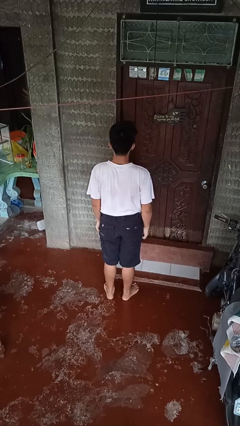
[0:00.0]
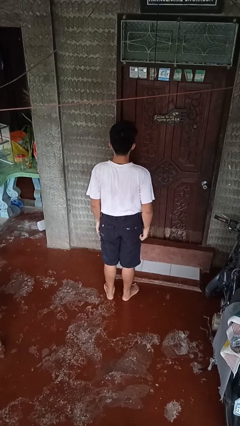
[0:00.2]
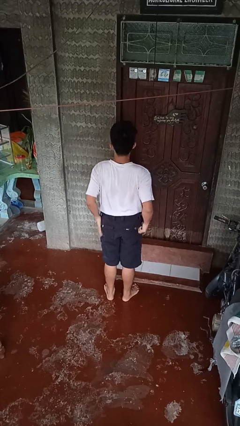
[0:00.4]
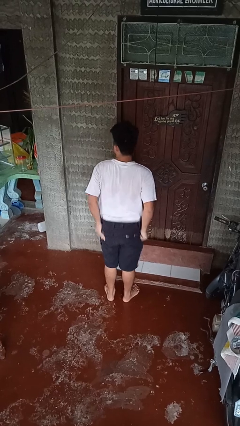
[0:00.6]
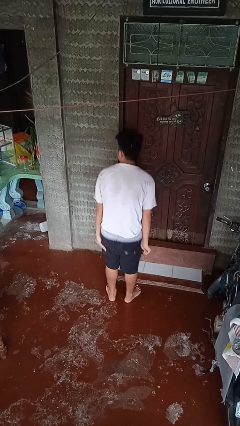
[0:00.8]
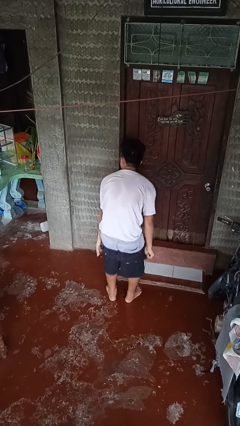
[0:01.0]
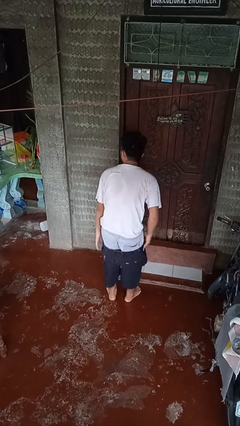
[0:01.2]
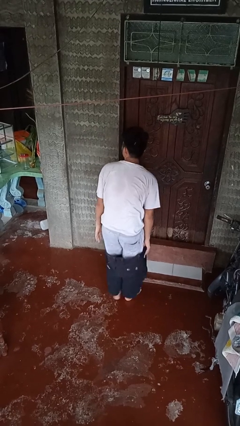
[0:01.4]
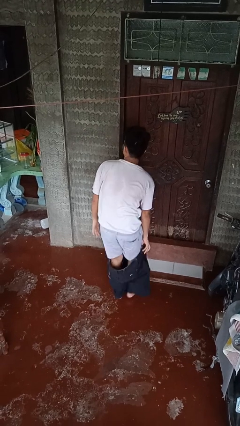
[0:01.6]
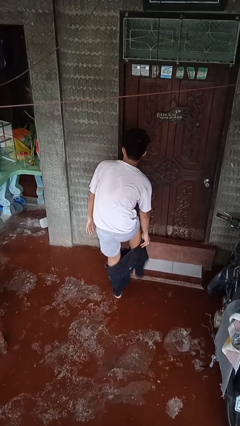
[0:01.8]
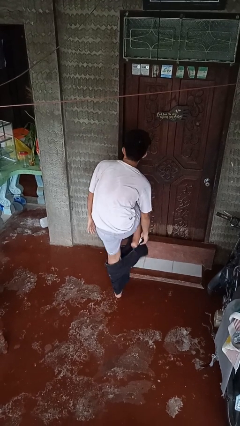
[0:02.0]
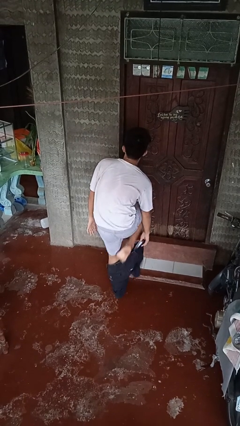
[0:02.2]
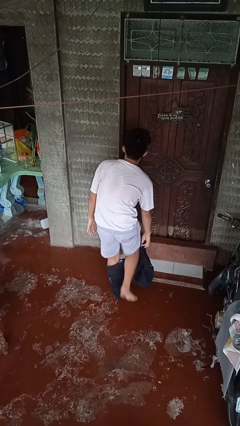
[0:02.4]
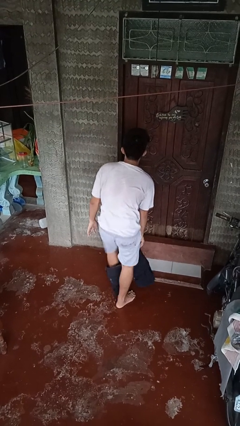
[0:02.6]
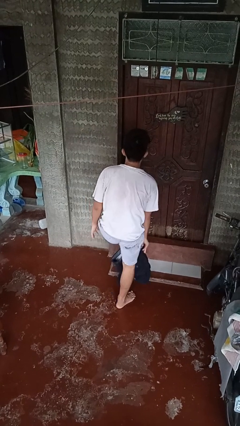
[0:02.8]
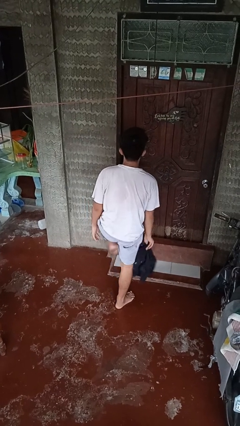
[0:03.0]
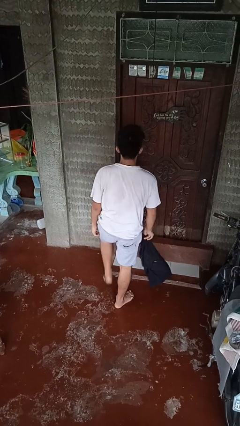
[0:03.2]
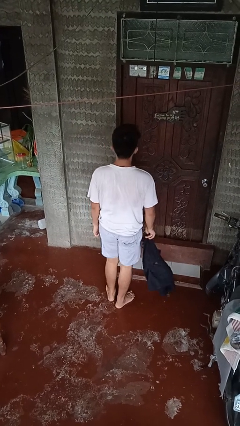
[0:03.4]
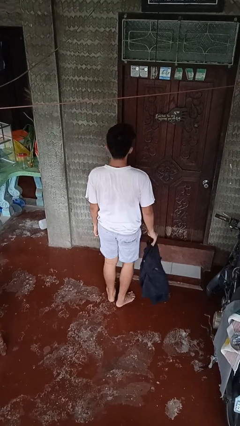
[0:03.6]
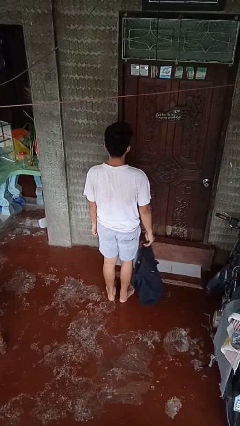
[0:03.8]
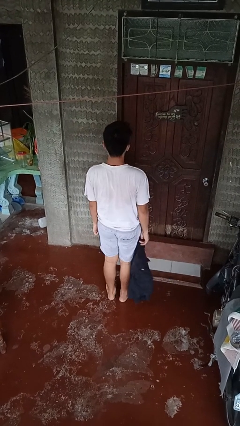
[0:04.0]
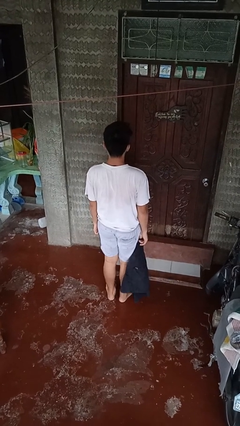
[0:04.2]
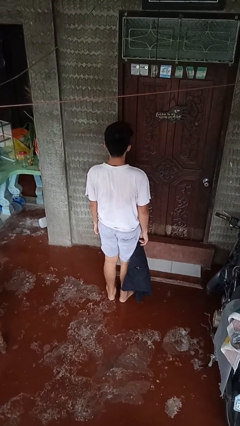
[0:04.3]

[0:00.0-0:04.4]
person takes off pants

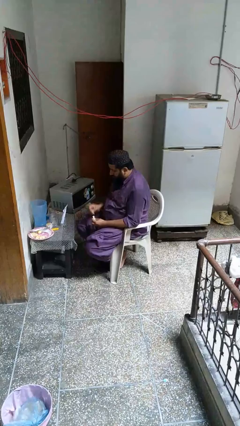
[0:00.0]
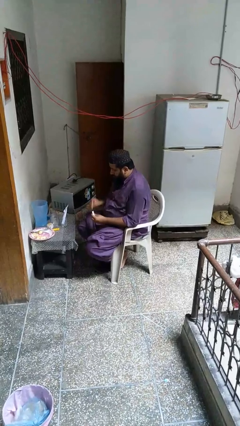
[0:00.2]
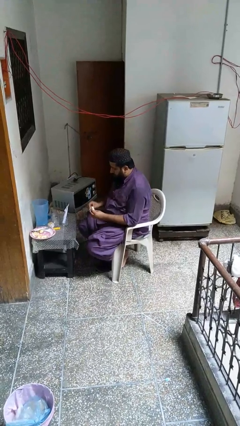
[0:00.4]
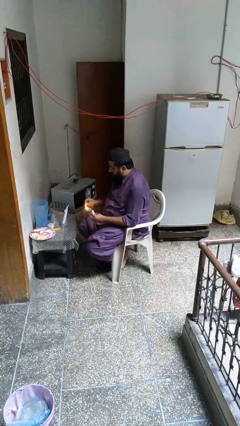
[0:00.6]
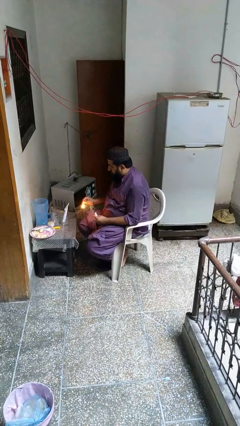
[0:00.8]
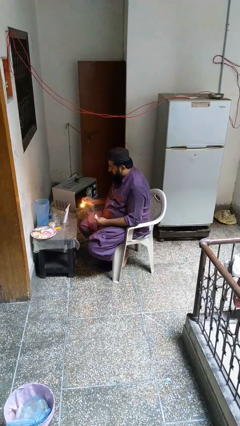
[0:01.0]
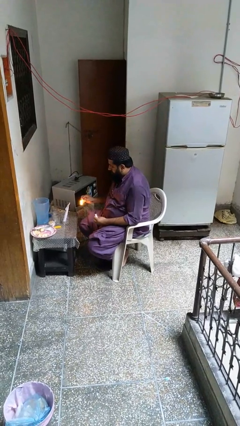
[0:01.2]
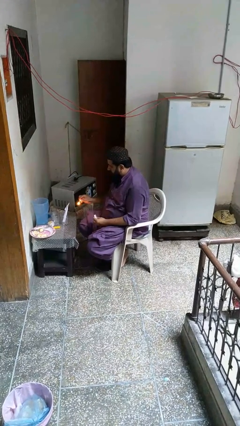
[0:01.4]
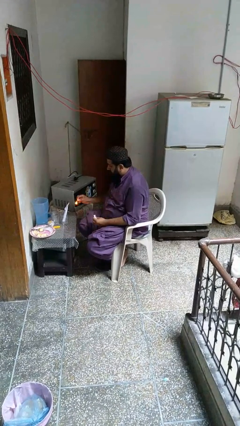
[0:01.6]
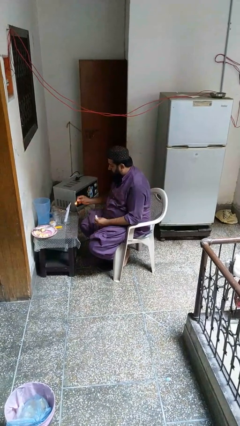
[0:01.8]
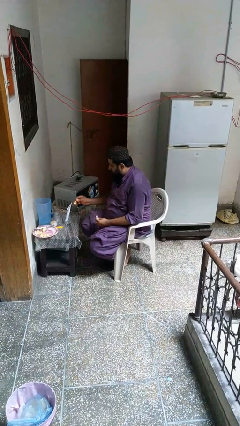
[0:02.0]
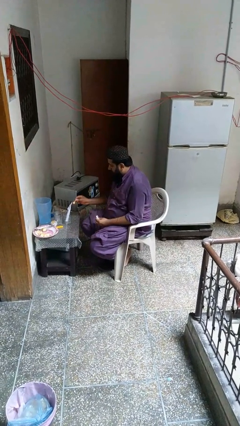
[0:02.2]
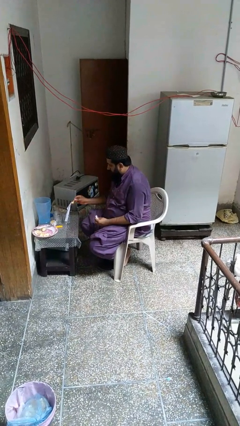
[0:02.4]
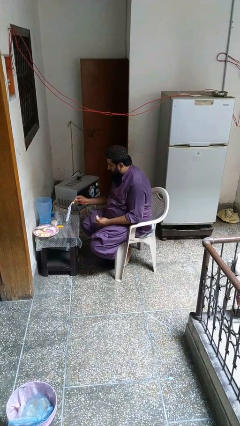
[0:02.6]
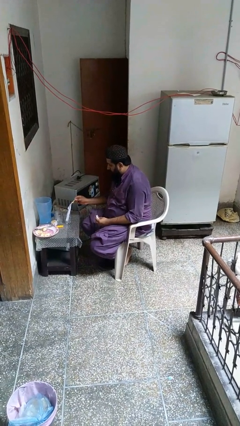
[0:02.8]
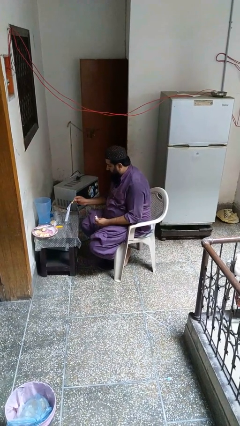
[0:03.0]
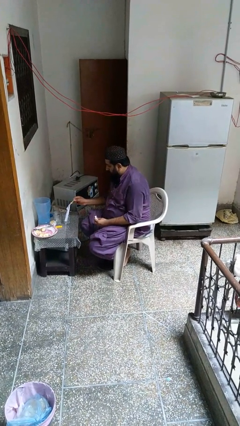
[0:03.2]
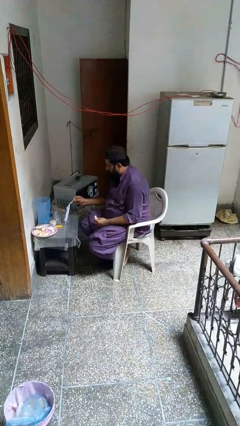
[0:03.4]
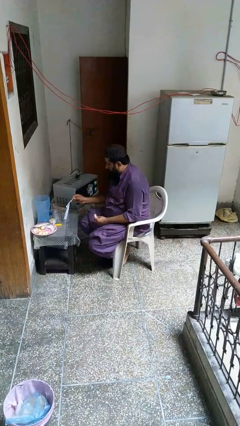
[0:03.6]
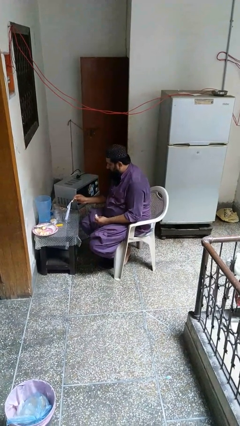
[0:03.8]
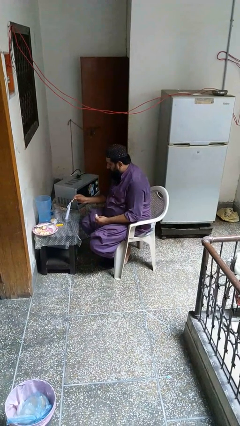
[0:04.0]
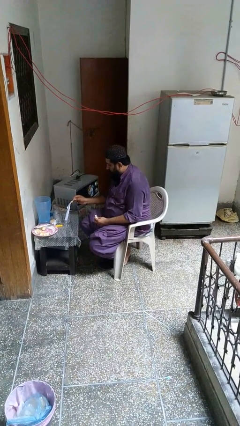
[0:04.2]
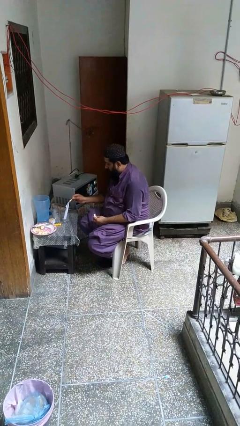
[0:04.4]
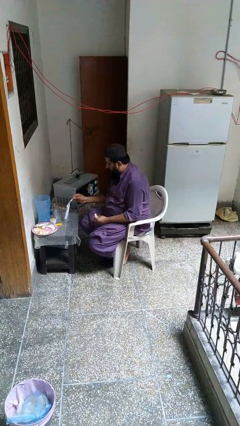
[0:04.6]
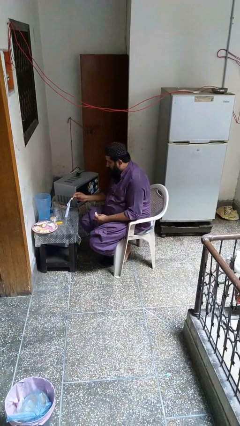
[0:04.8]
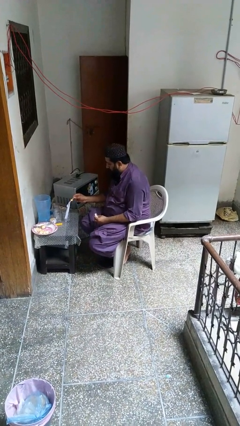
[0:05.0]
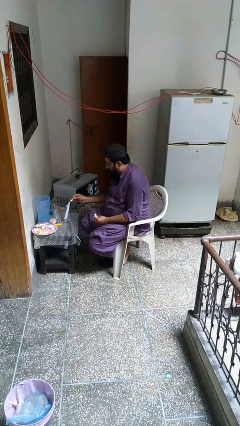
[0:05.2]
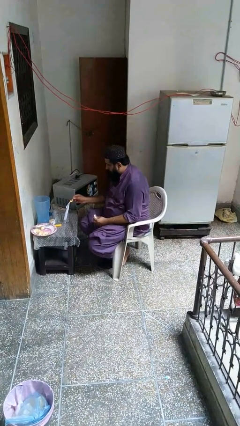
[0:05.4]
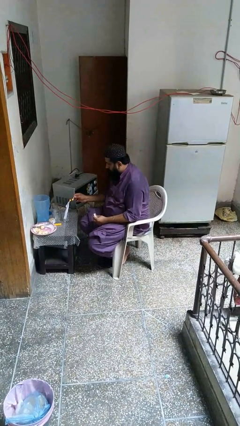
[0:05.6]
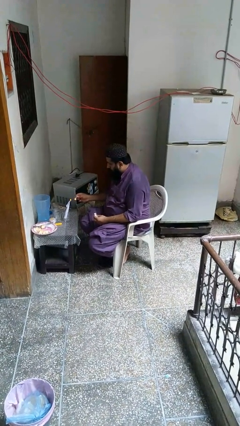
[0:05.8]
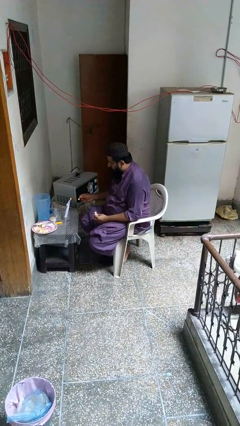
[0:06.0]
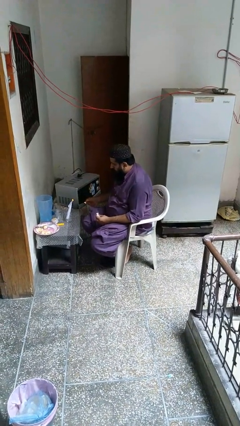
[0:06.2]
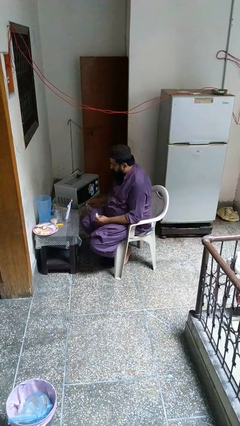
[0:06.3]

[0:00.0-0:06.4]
person lights candle

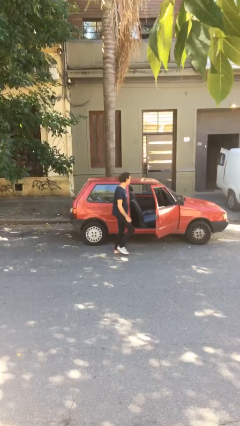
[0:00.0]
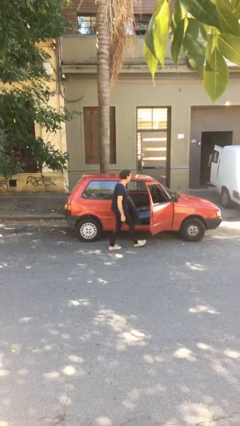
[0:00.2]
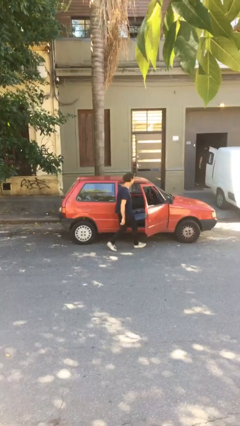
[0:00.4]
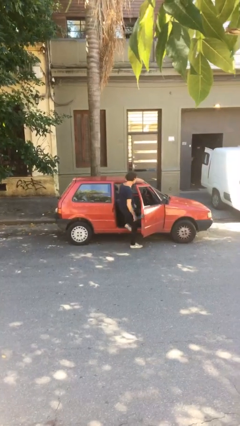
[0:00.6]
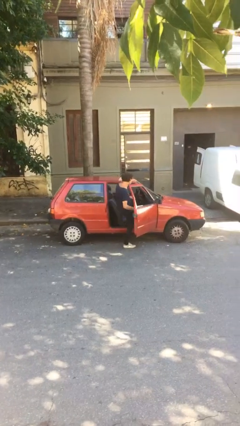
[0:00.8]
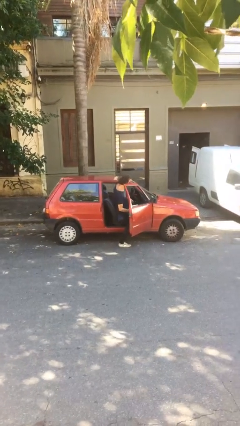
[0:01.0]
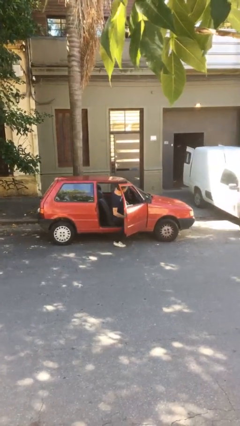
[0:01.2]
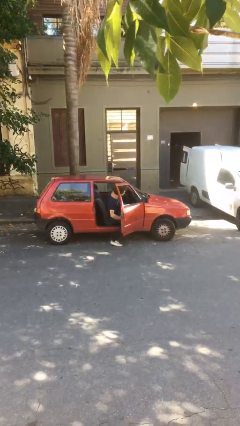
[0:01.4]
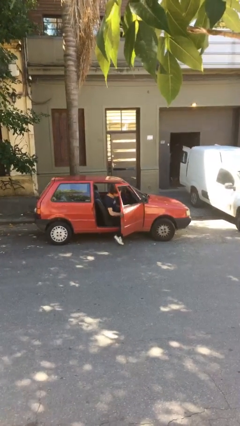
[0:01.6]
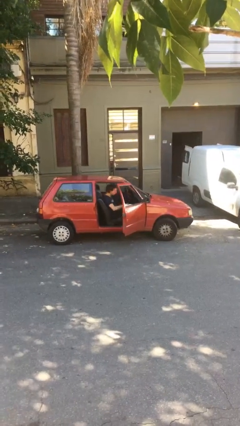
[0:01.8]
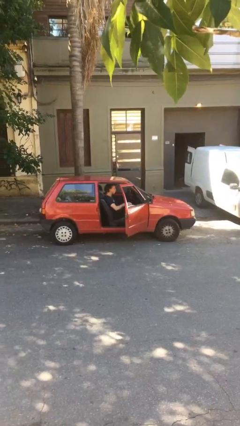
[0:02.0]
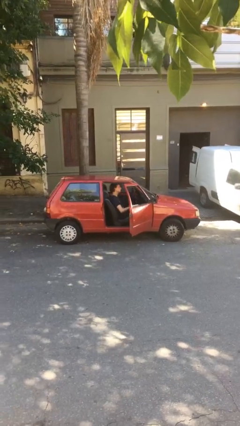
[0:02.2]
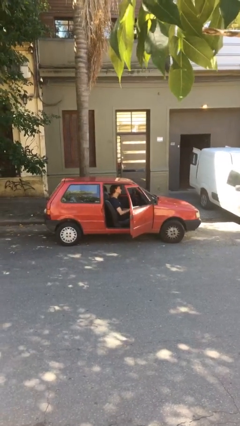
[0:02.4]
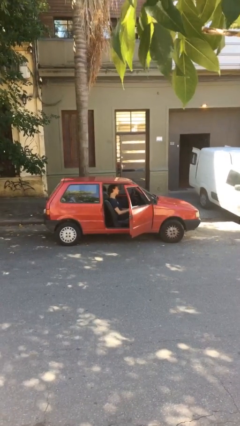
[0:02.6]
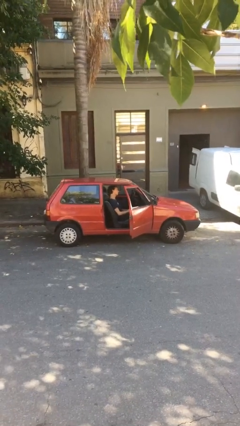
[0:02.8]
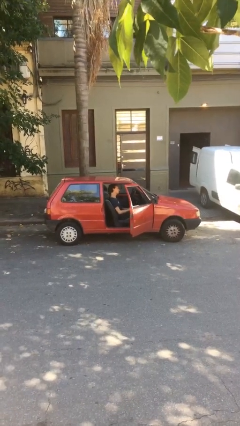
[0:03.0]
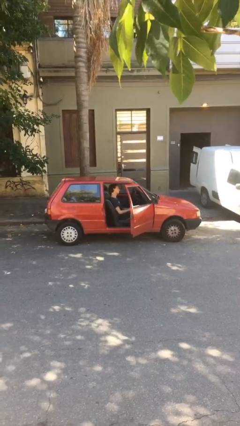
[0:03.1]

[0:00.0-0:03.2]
person enters car

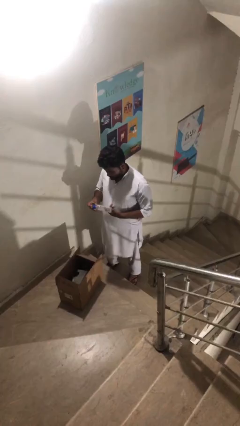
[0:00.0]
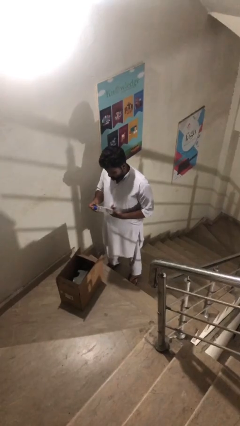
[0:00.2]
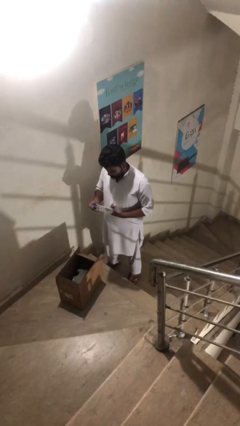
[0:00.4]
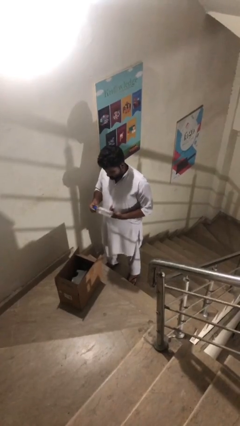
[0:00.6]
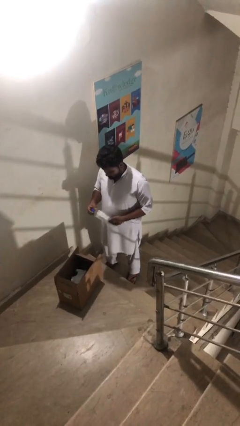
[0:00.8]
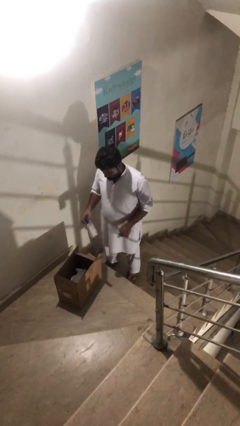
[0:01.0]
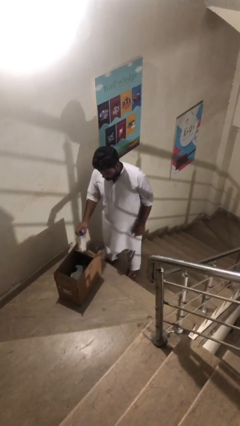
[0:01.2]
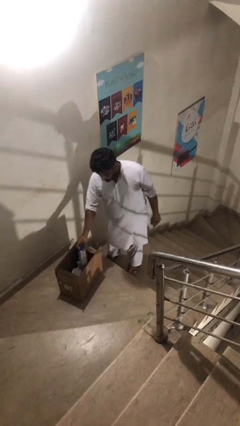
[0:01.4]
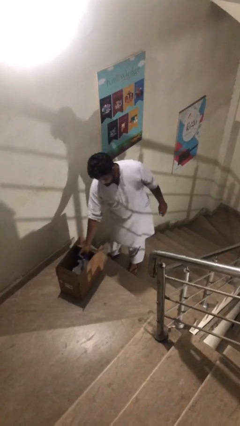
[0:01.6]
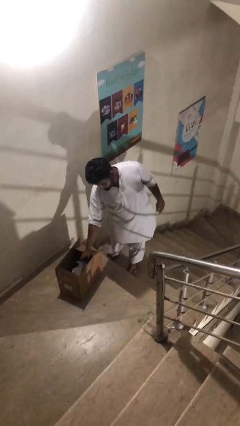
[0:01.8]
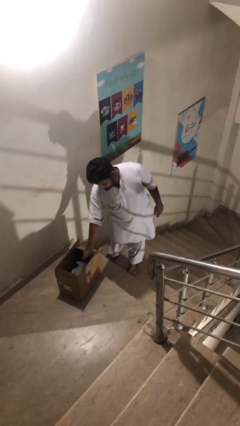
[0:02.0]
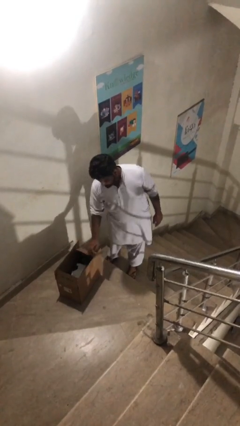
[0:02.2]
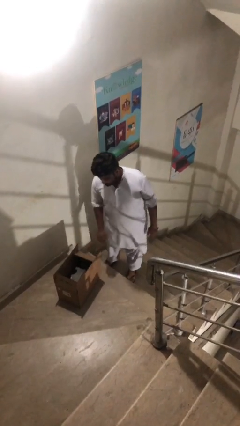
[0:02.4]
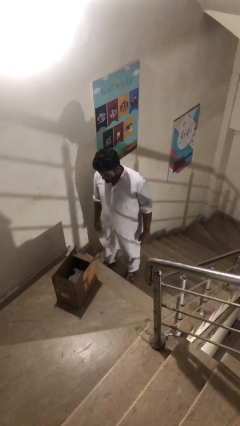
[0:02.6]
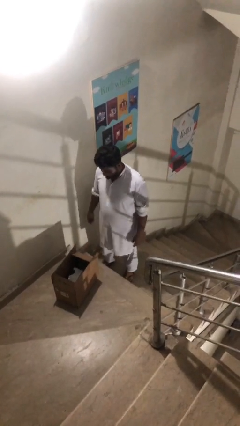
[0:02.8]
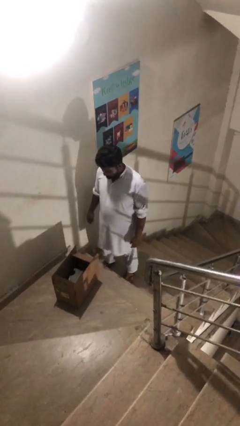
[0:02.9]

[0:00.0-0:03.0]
person puts object into box

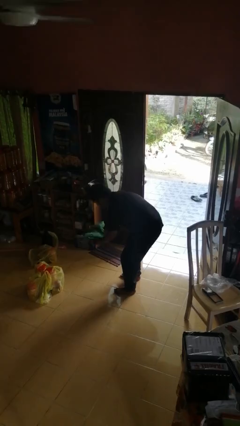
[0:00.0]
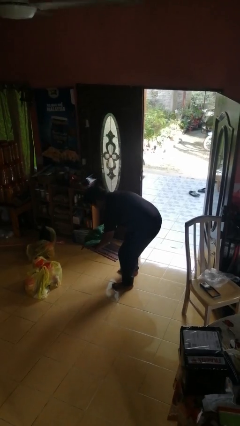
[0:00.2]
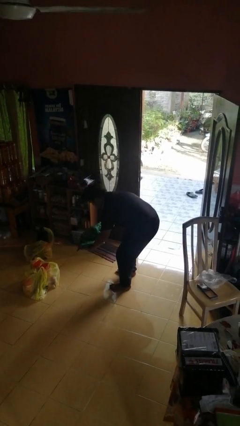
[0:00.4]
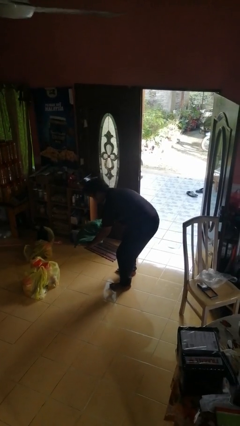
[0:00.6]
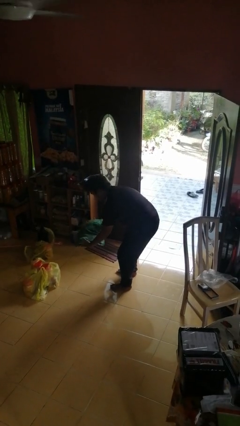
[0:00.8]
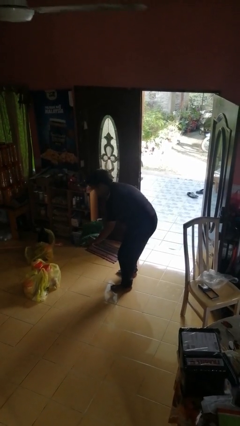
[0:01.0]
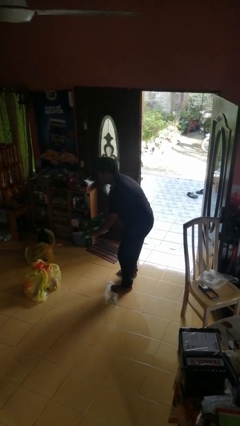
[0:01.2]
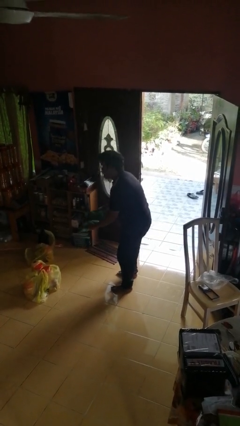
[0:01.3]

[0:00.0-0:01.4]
person catches dropped object
